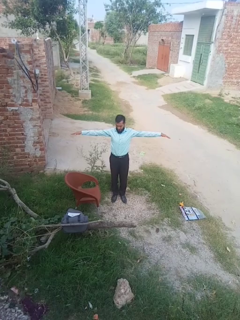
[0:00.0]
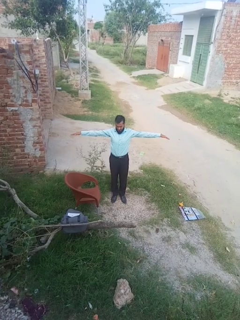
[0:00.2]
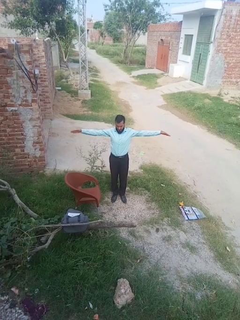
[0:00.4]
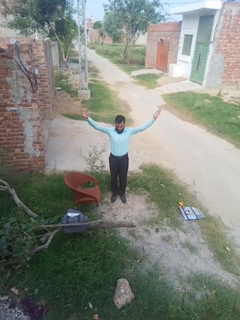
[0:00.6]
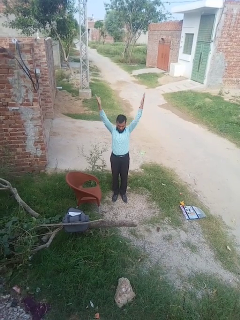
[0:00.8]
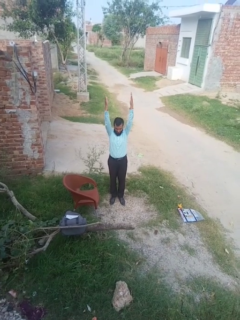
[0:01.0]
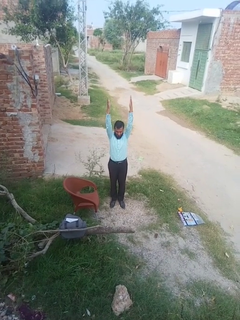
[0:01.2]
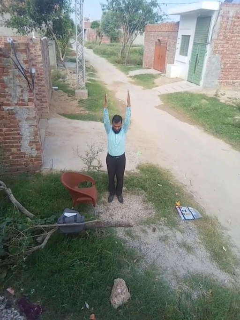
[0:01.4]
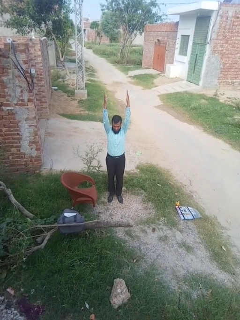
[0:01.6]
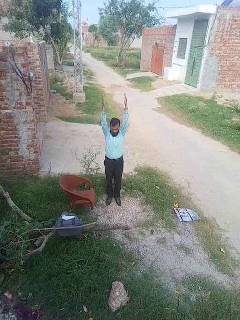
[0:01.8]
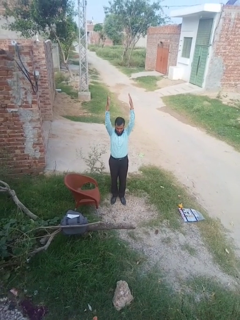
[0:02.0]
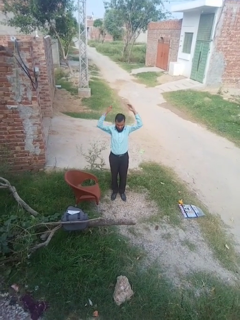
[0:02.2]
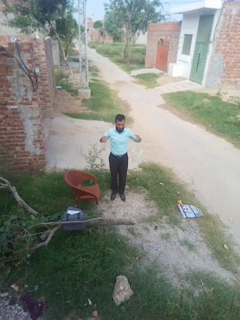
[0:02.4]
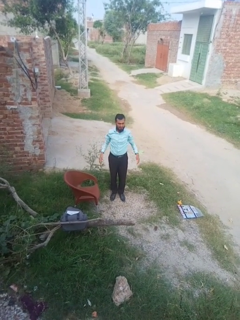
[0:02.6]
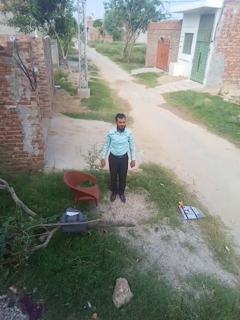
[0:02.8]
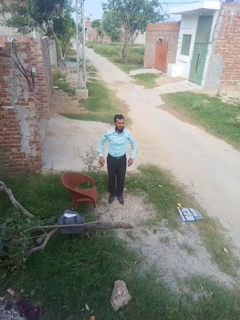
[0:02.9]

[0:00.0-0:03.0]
person stretches arms over head

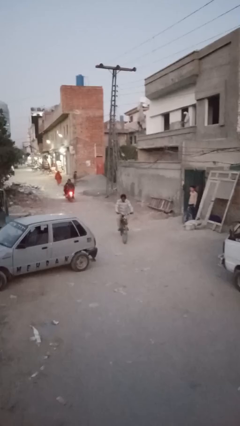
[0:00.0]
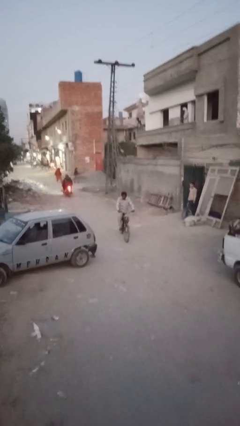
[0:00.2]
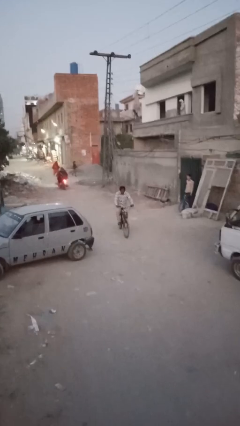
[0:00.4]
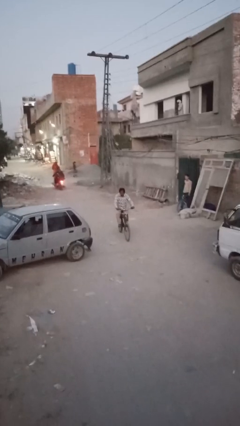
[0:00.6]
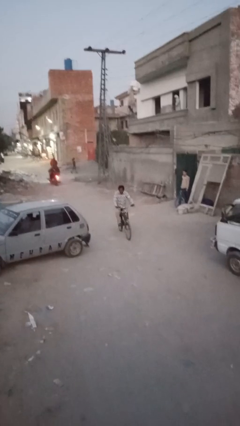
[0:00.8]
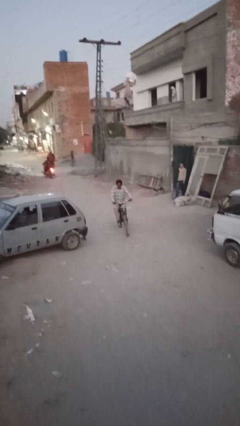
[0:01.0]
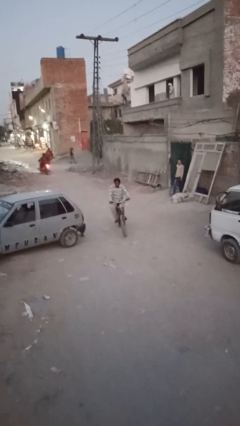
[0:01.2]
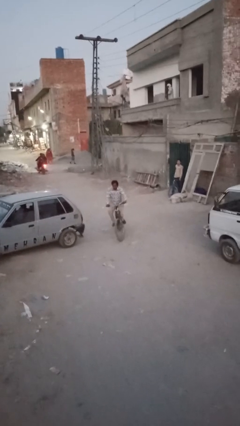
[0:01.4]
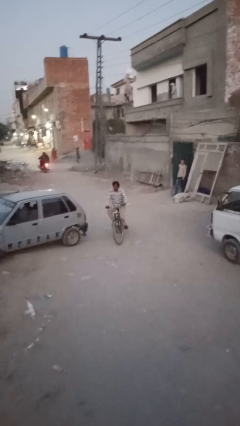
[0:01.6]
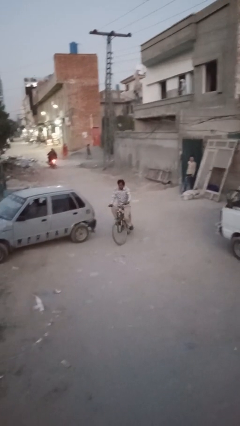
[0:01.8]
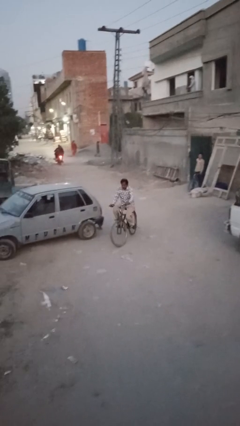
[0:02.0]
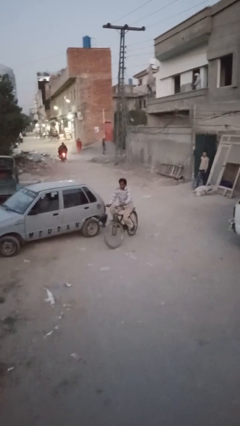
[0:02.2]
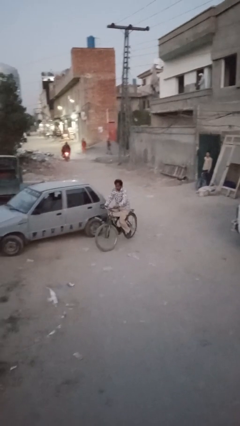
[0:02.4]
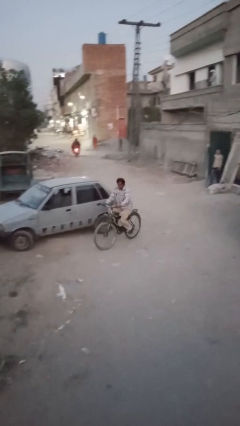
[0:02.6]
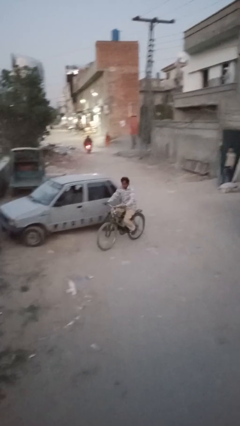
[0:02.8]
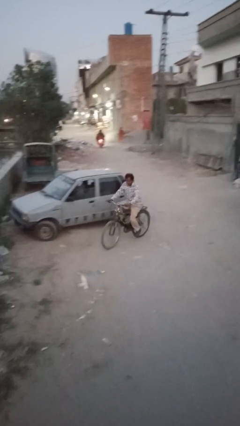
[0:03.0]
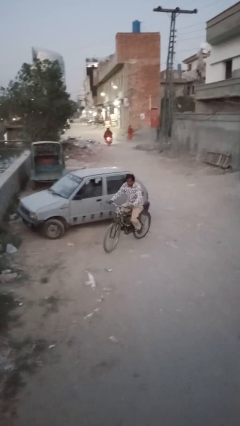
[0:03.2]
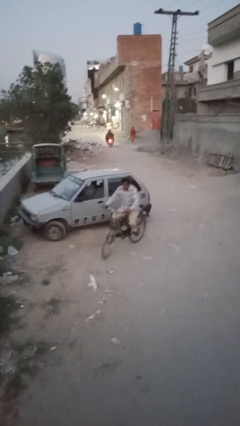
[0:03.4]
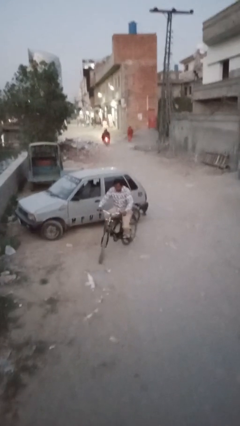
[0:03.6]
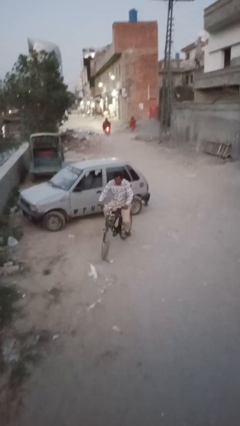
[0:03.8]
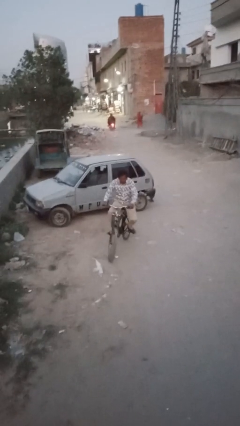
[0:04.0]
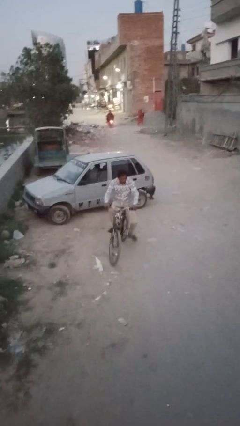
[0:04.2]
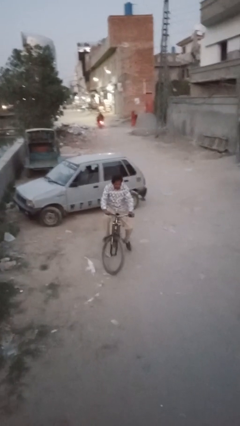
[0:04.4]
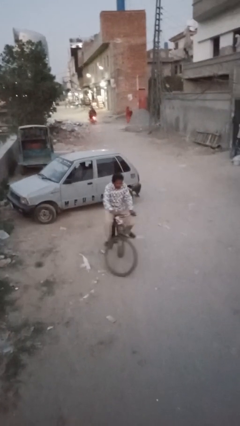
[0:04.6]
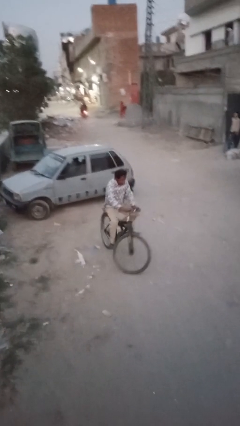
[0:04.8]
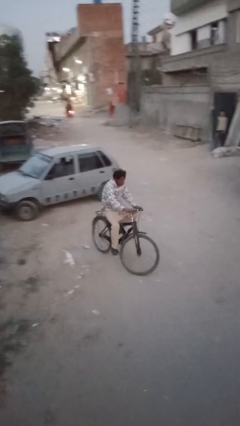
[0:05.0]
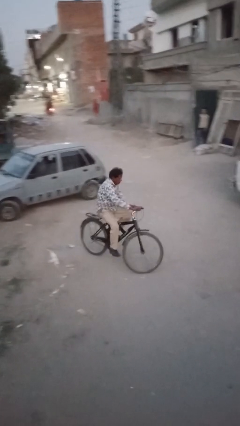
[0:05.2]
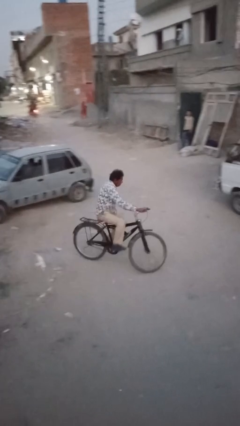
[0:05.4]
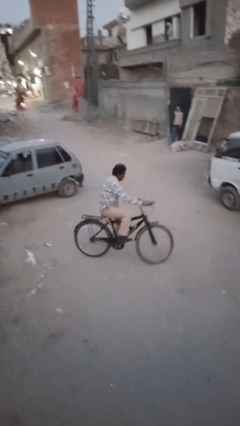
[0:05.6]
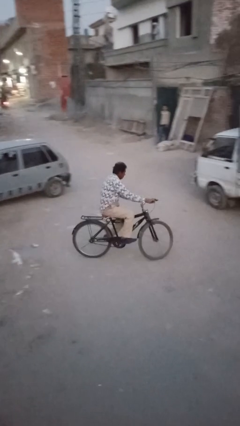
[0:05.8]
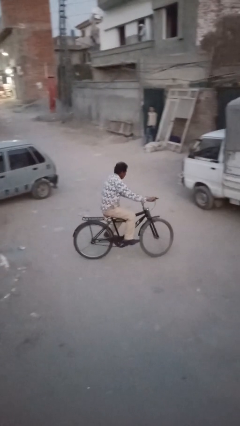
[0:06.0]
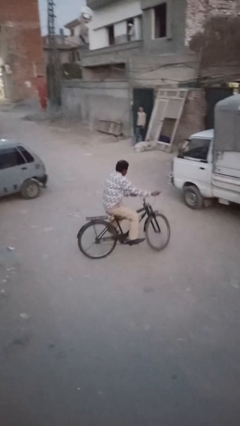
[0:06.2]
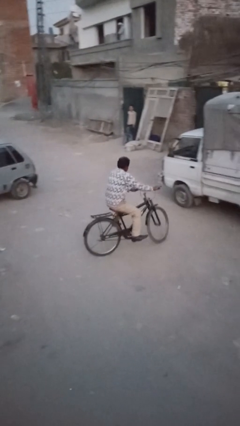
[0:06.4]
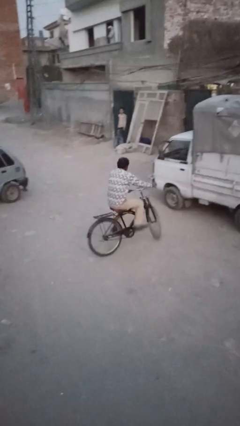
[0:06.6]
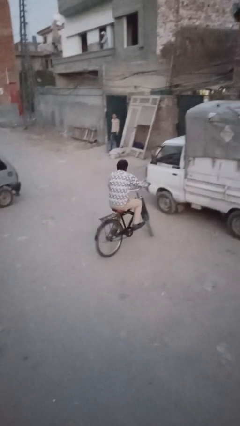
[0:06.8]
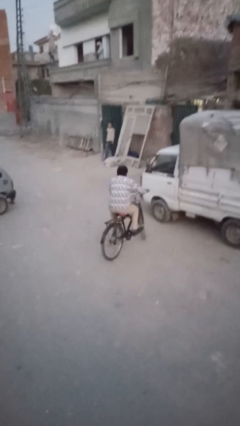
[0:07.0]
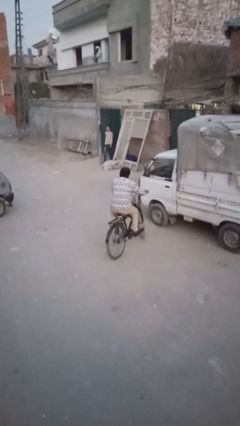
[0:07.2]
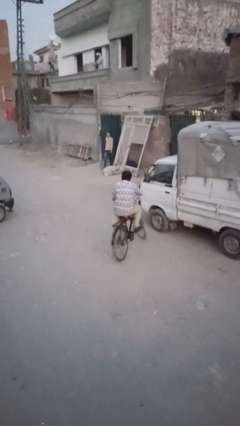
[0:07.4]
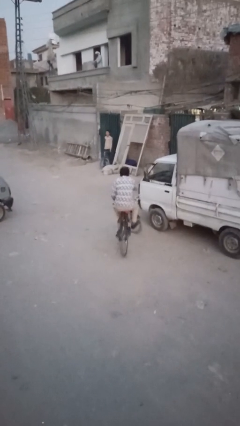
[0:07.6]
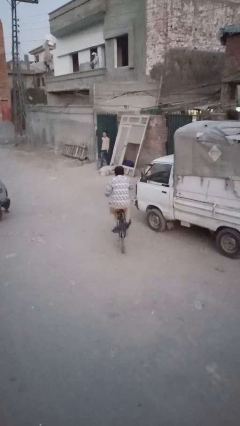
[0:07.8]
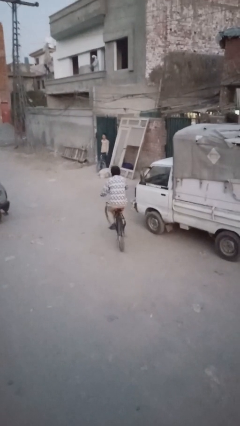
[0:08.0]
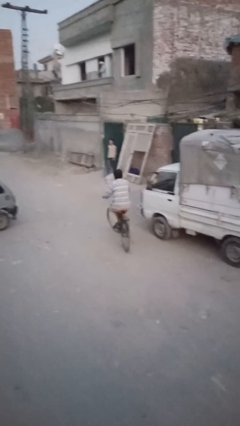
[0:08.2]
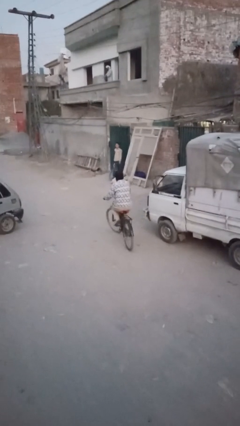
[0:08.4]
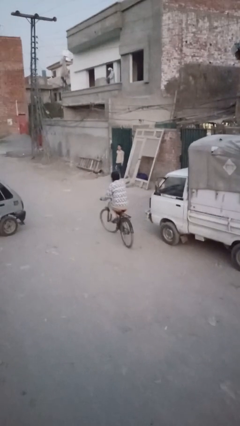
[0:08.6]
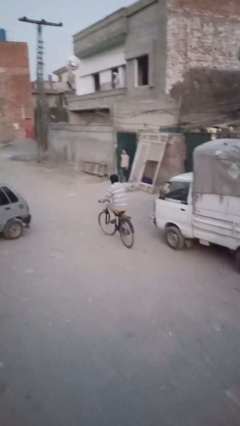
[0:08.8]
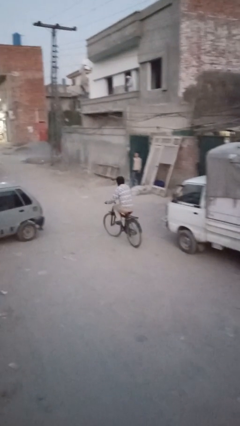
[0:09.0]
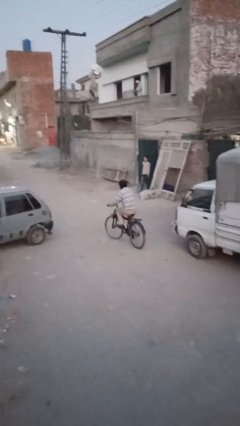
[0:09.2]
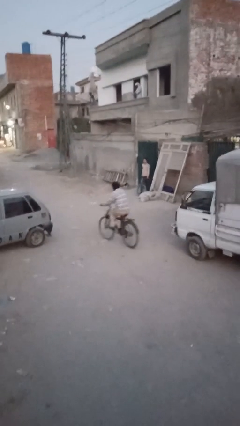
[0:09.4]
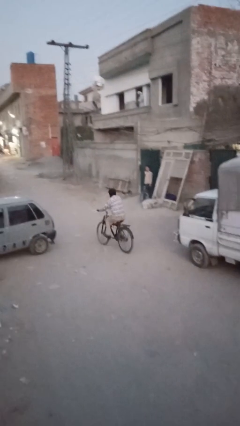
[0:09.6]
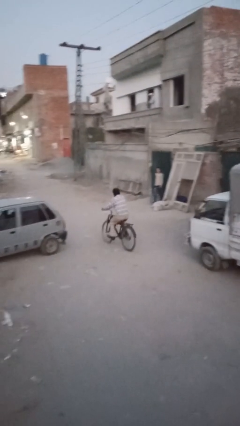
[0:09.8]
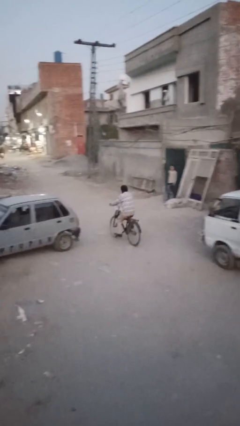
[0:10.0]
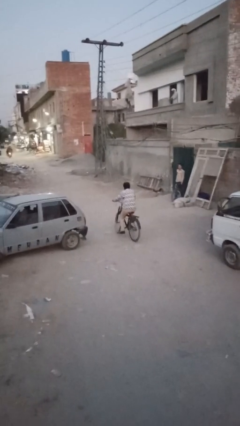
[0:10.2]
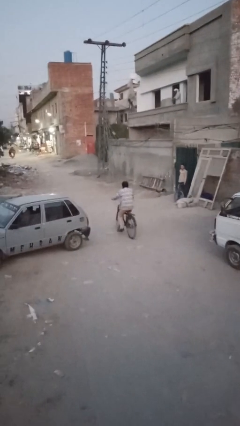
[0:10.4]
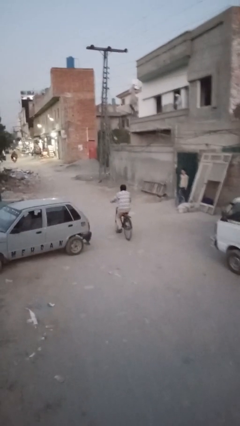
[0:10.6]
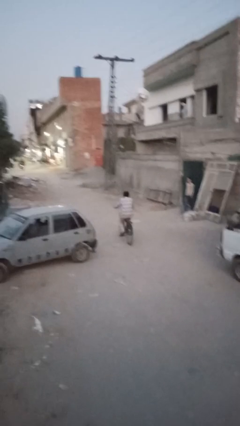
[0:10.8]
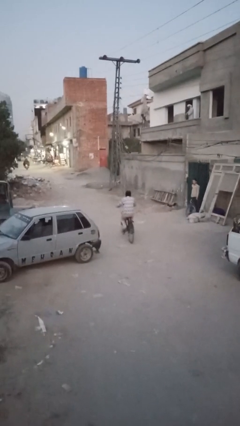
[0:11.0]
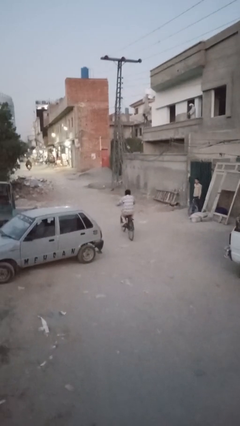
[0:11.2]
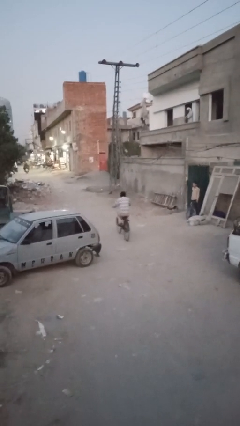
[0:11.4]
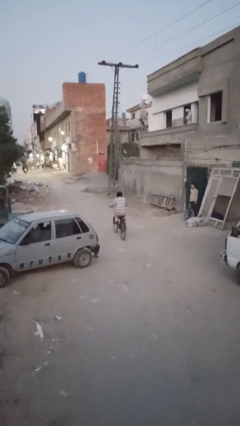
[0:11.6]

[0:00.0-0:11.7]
person rides bicycle

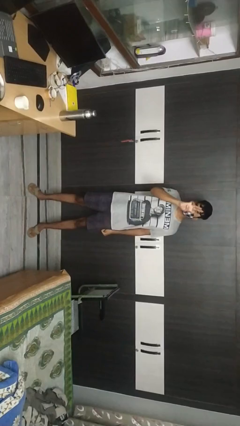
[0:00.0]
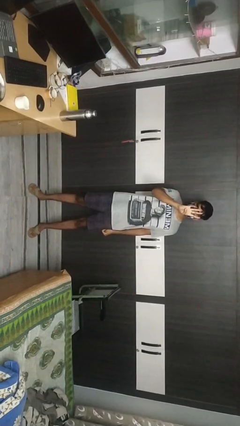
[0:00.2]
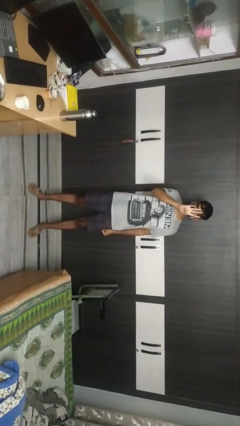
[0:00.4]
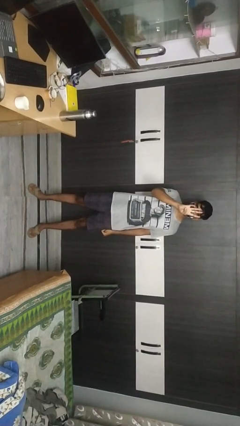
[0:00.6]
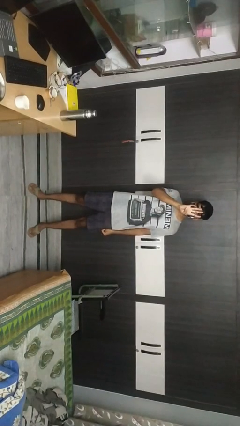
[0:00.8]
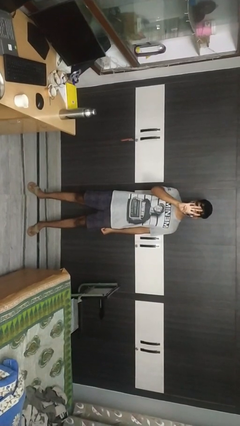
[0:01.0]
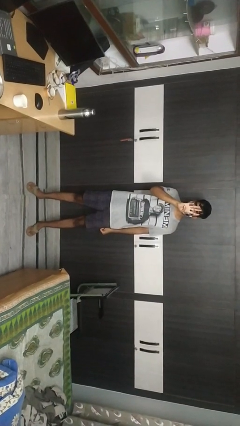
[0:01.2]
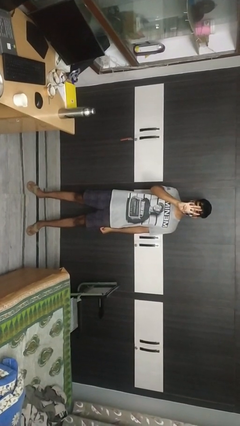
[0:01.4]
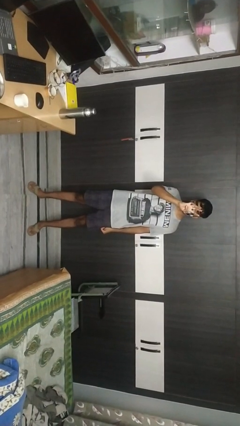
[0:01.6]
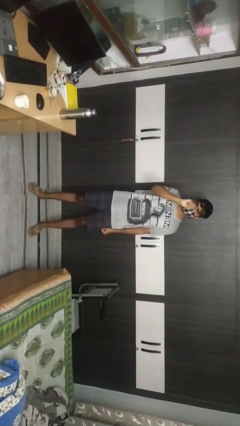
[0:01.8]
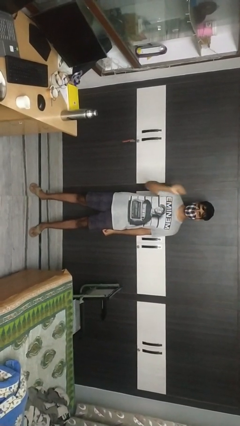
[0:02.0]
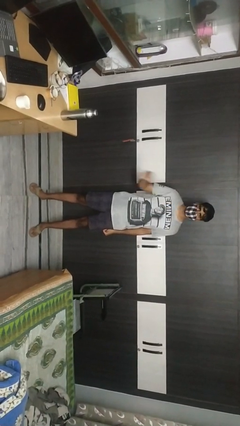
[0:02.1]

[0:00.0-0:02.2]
person gestures number four

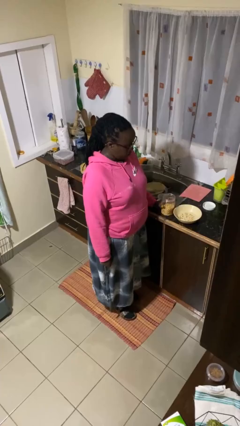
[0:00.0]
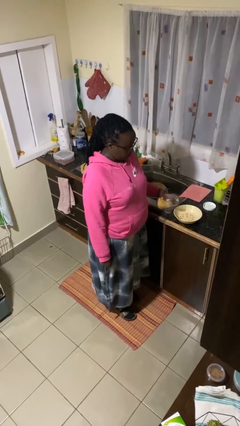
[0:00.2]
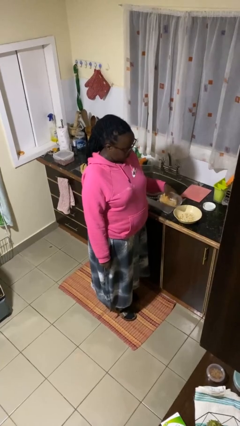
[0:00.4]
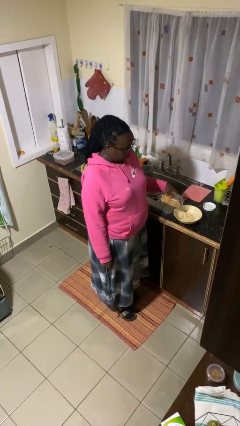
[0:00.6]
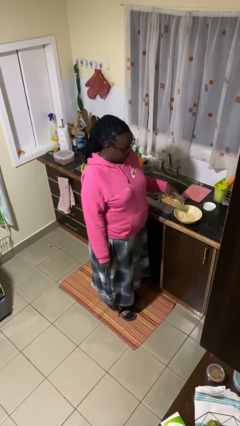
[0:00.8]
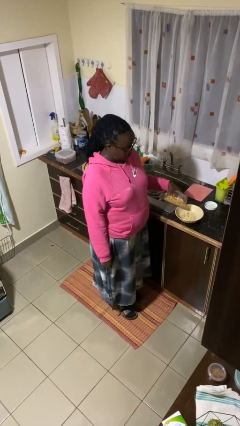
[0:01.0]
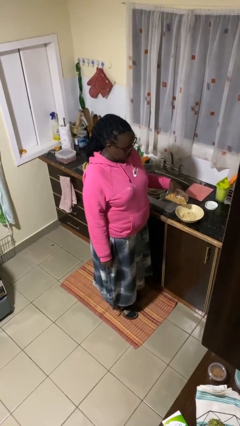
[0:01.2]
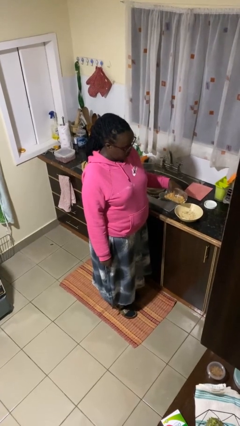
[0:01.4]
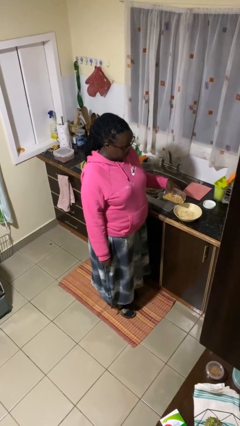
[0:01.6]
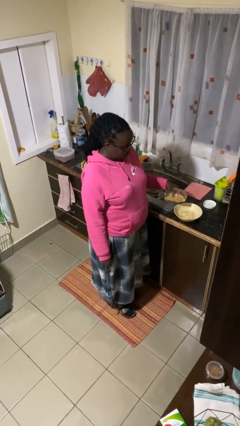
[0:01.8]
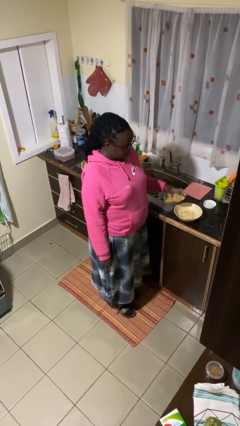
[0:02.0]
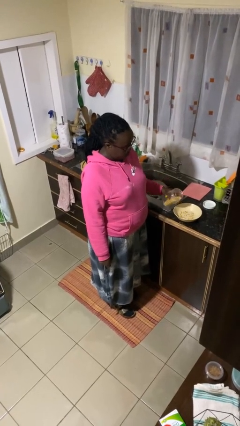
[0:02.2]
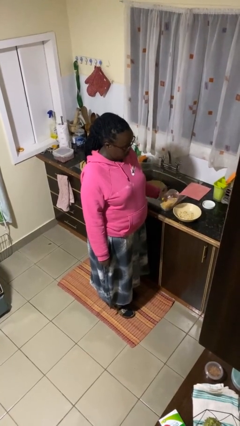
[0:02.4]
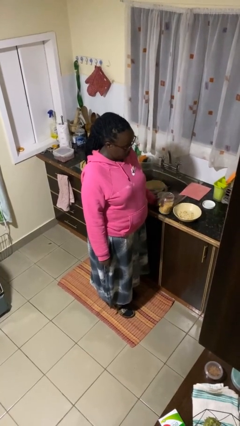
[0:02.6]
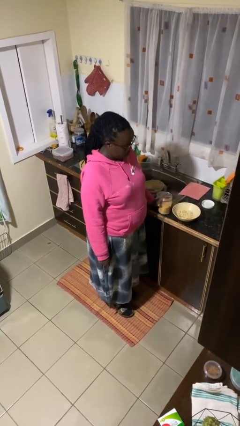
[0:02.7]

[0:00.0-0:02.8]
person pours into bowl
